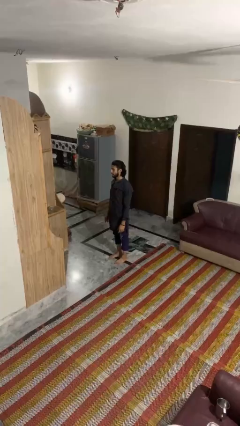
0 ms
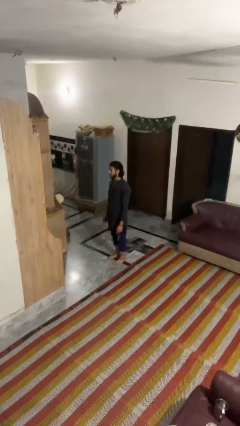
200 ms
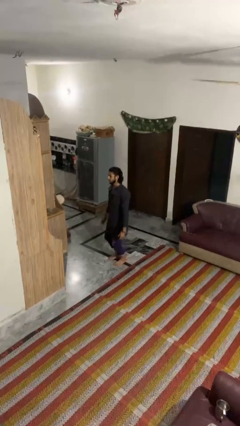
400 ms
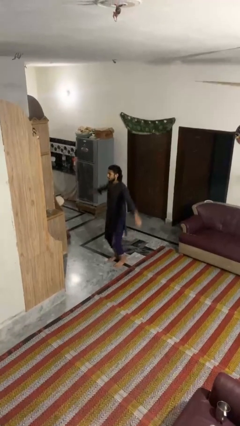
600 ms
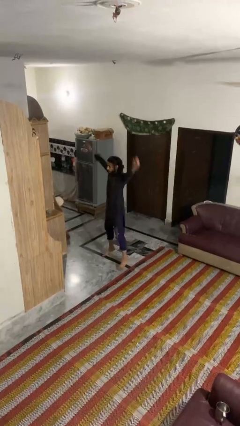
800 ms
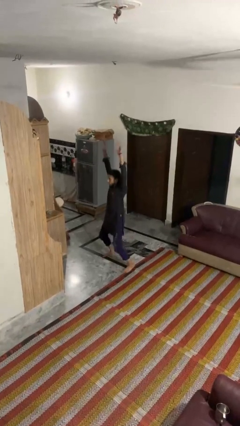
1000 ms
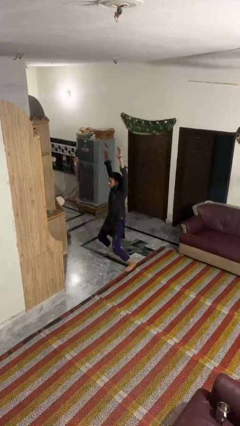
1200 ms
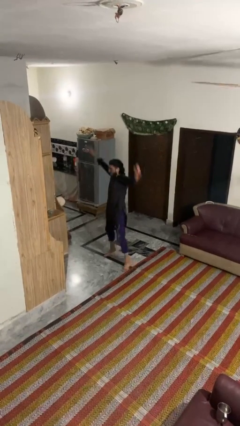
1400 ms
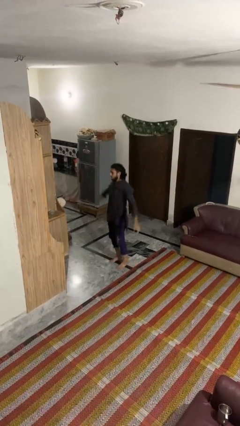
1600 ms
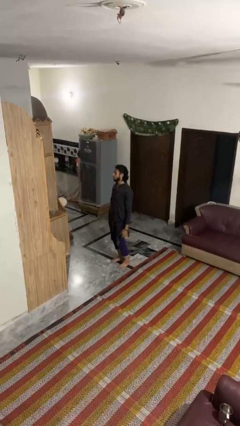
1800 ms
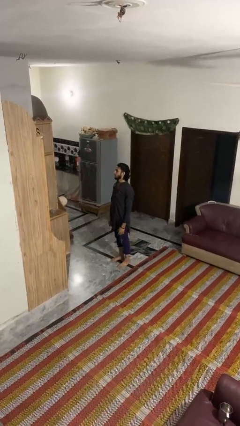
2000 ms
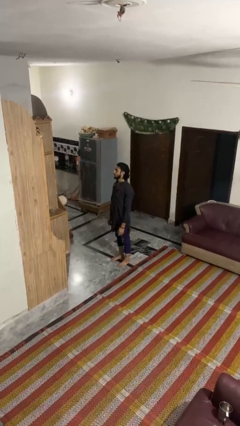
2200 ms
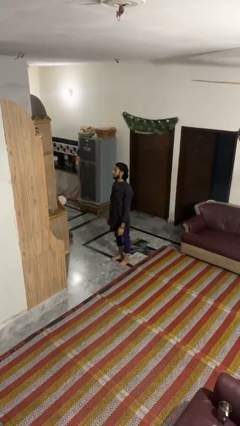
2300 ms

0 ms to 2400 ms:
person exercises with jumping jacks

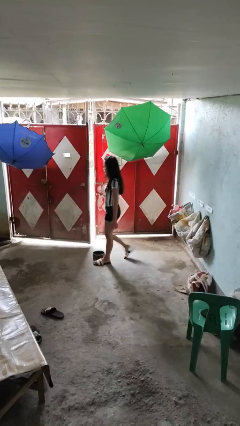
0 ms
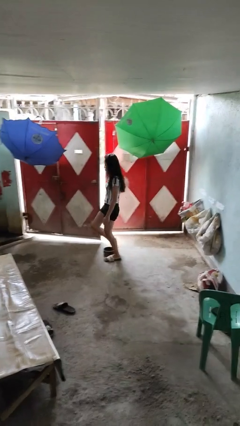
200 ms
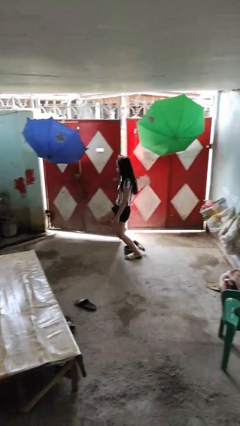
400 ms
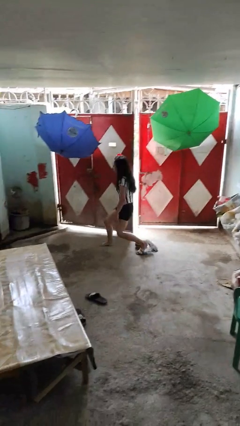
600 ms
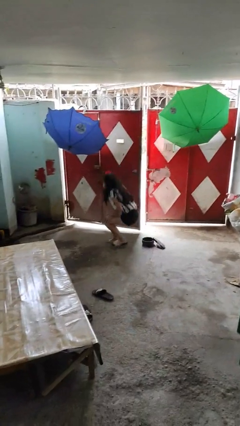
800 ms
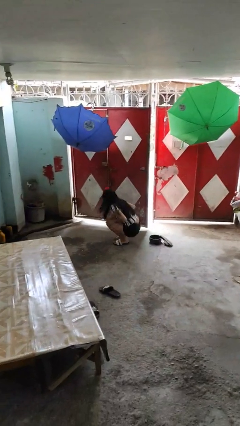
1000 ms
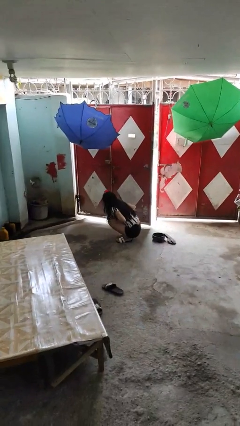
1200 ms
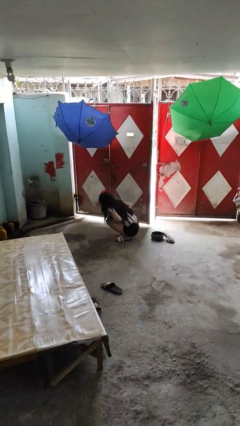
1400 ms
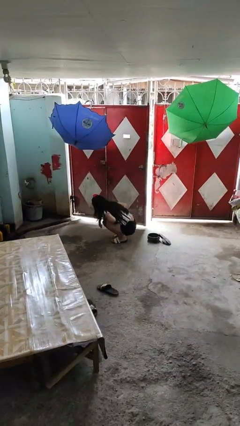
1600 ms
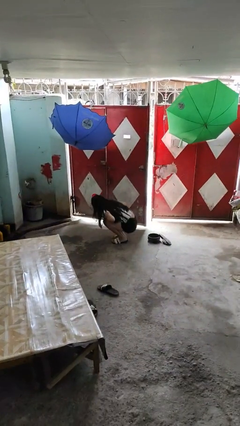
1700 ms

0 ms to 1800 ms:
person trips on object on floor

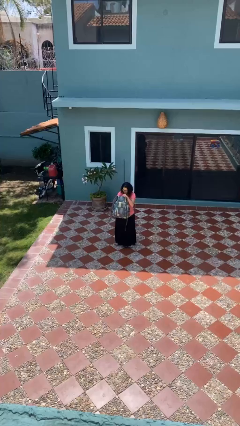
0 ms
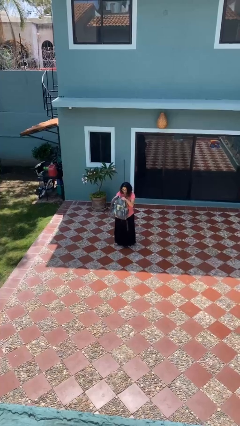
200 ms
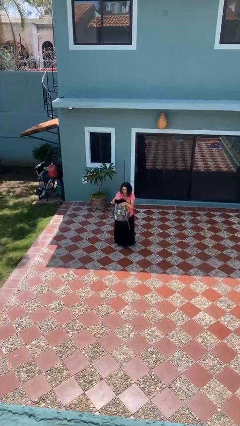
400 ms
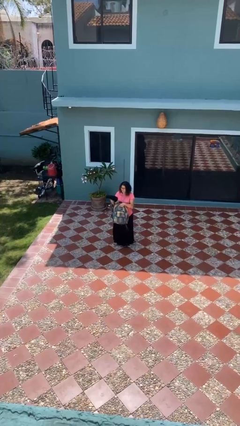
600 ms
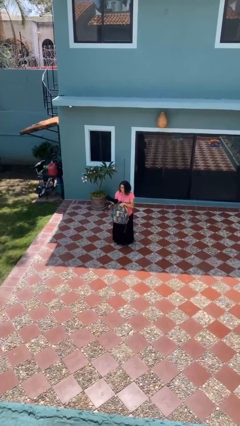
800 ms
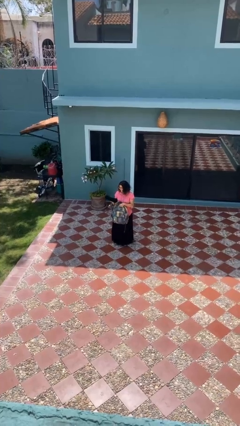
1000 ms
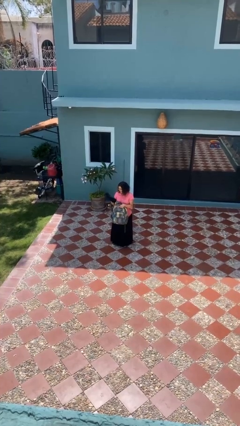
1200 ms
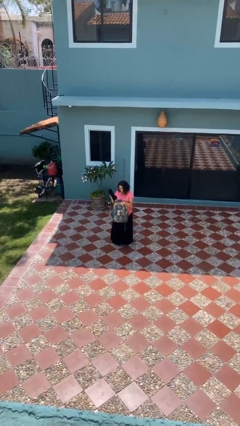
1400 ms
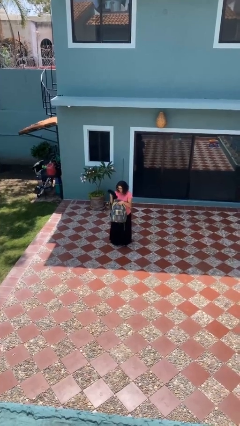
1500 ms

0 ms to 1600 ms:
person takes object from backpack

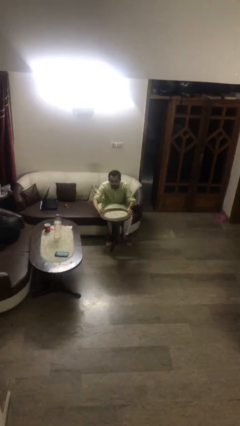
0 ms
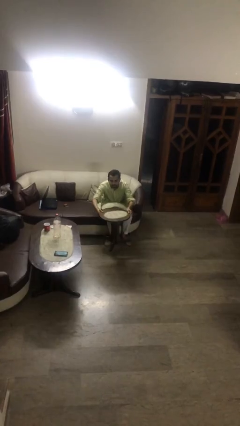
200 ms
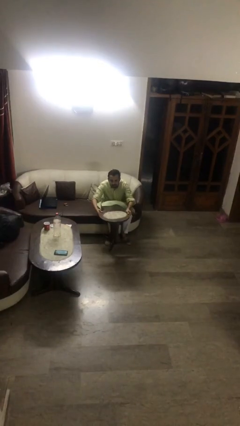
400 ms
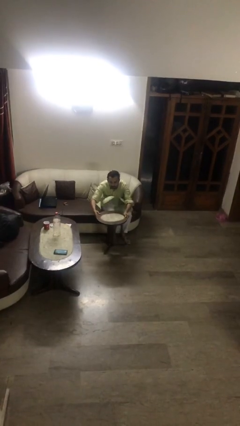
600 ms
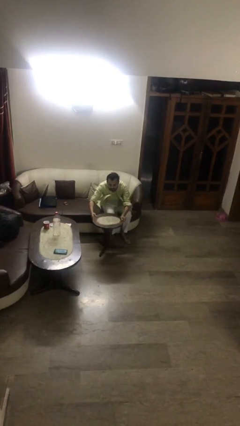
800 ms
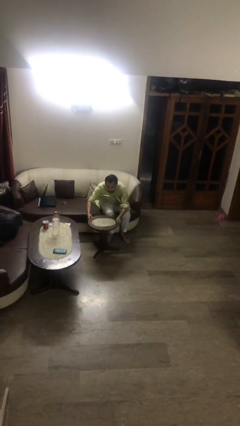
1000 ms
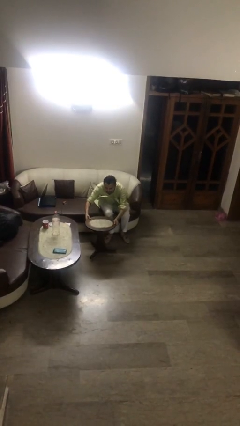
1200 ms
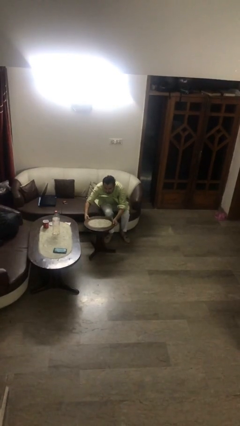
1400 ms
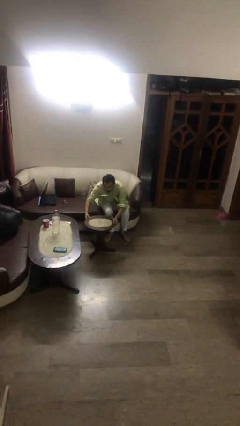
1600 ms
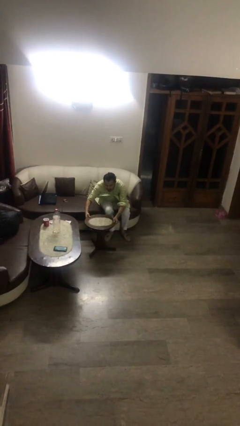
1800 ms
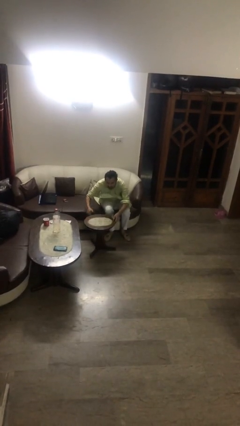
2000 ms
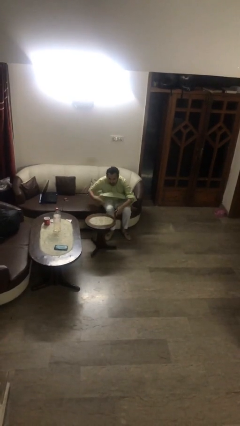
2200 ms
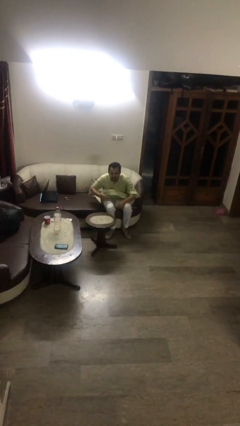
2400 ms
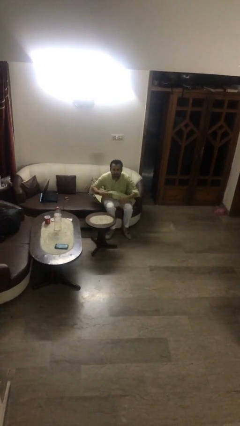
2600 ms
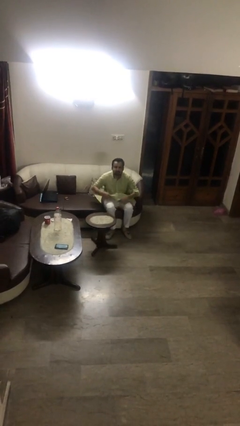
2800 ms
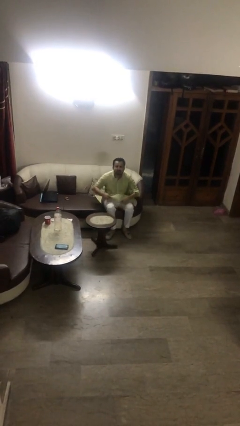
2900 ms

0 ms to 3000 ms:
person puts down object on floor

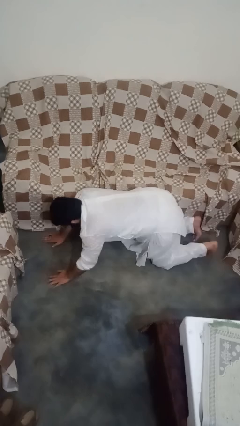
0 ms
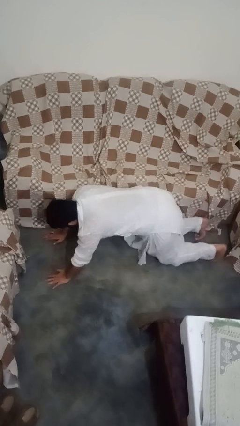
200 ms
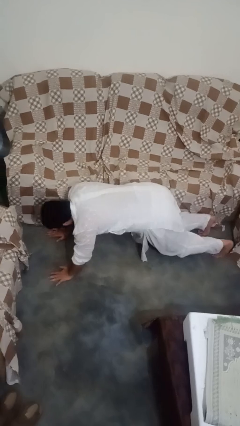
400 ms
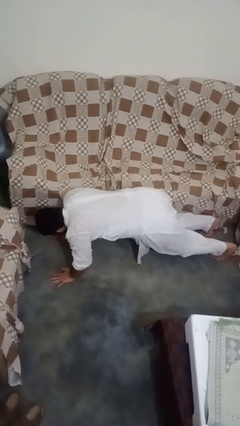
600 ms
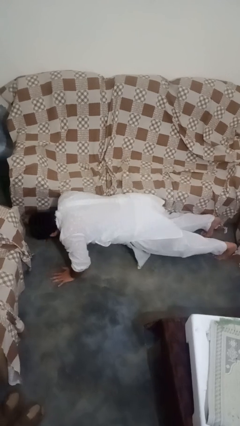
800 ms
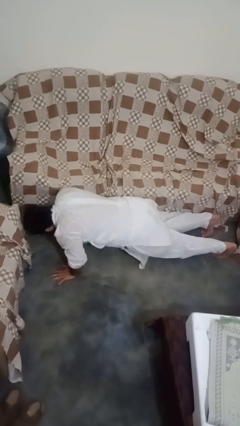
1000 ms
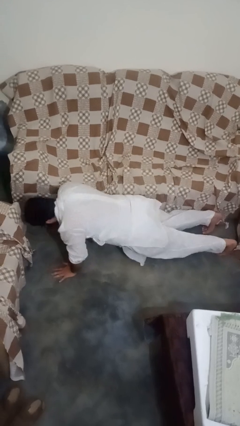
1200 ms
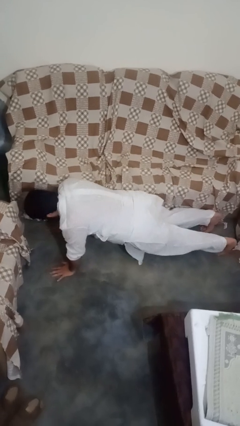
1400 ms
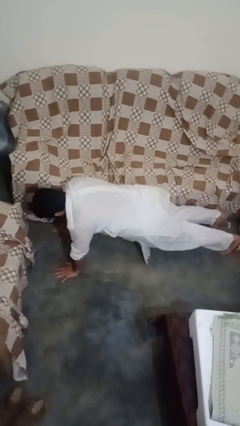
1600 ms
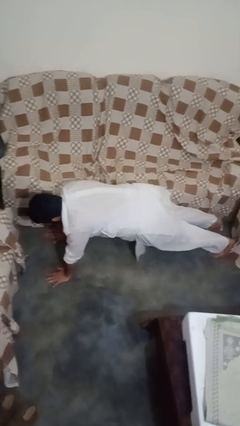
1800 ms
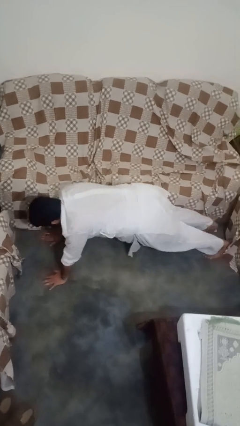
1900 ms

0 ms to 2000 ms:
person exercises with pushup

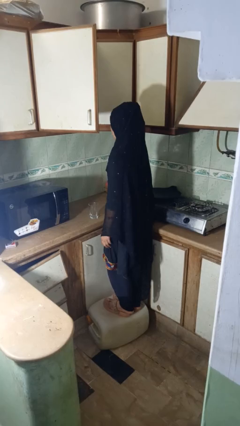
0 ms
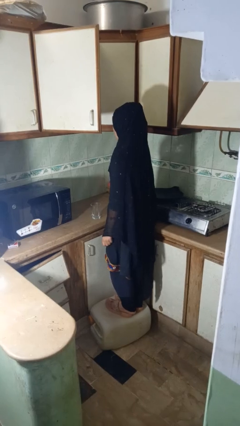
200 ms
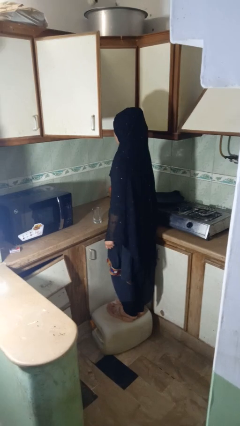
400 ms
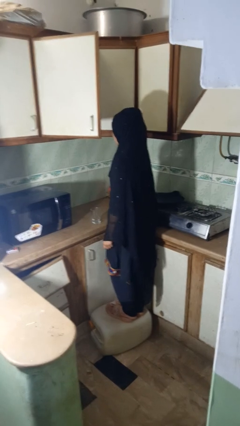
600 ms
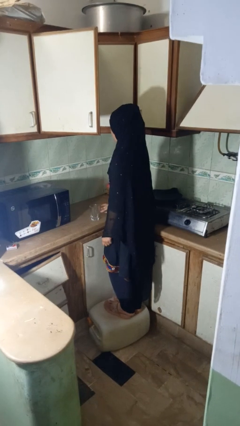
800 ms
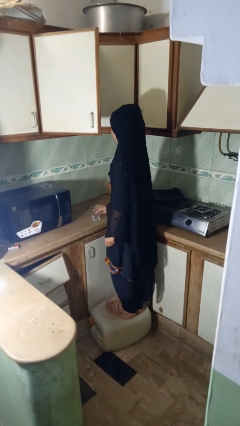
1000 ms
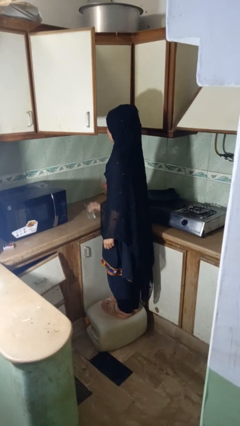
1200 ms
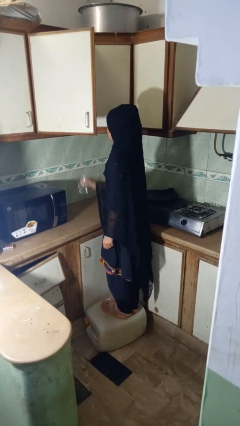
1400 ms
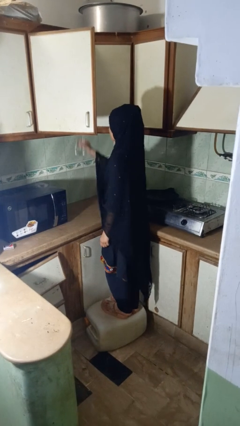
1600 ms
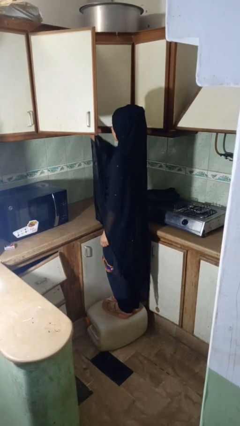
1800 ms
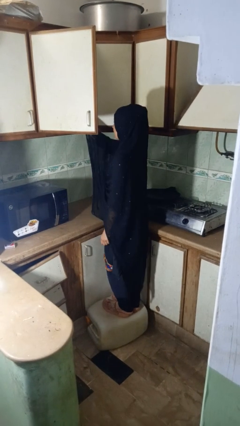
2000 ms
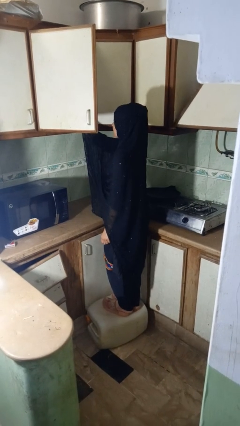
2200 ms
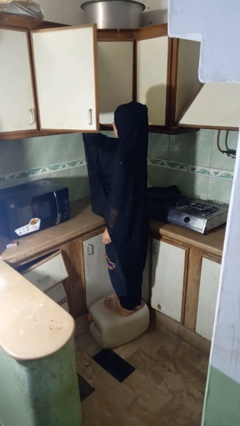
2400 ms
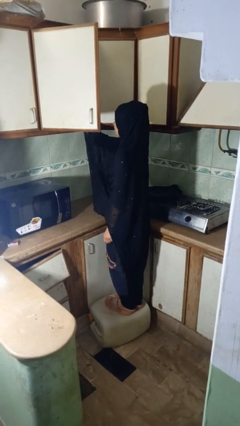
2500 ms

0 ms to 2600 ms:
person picks up object from cabinet

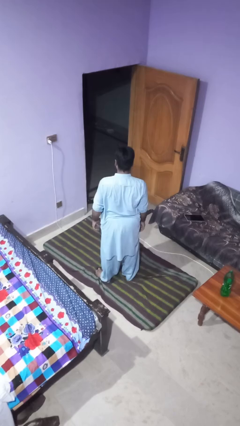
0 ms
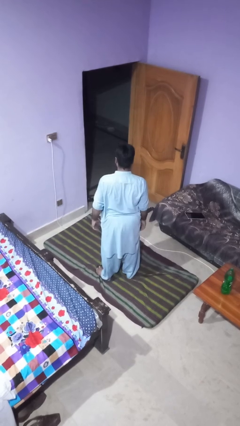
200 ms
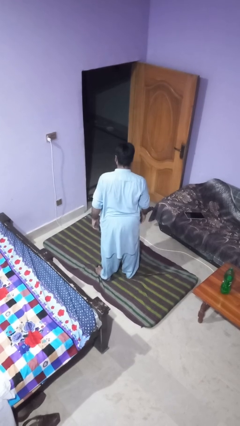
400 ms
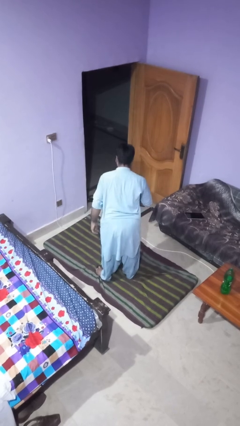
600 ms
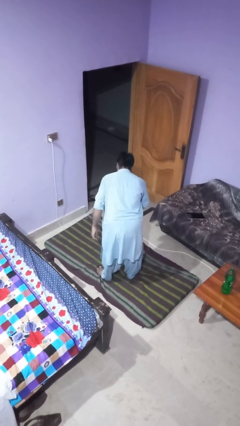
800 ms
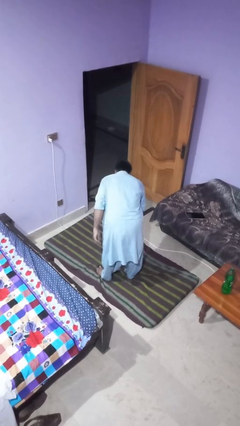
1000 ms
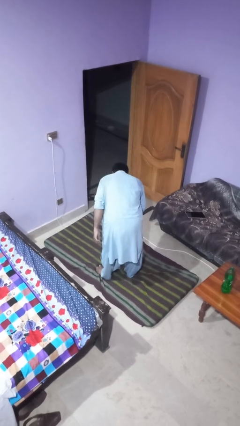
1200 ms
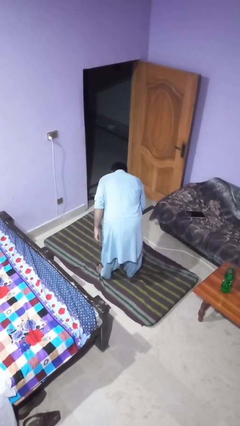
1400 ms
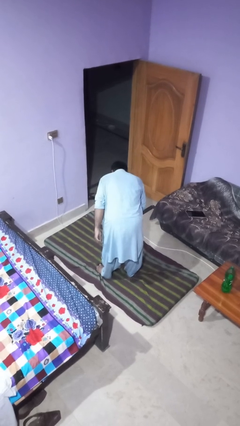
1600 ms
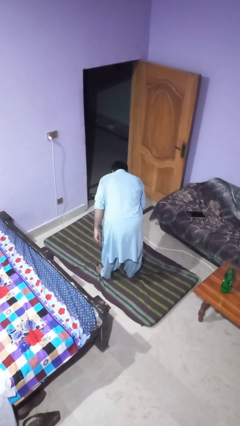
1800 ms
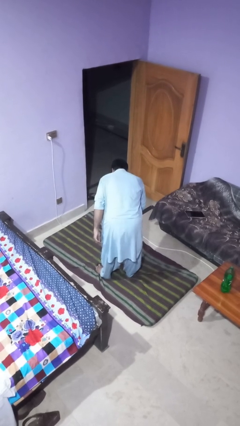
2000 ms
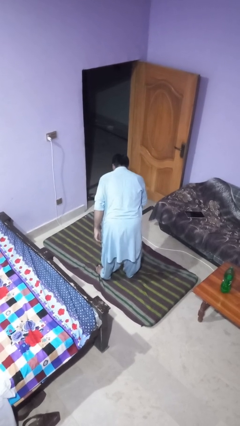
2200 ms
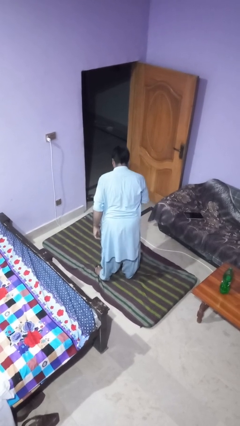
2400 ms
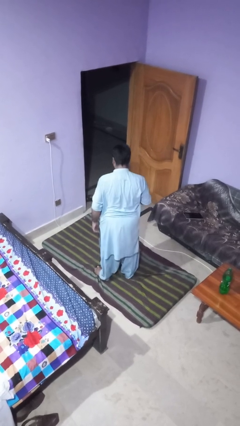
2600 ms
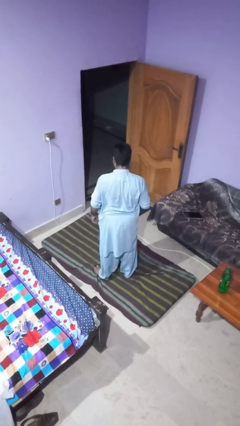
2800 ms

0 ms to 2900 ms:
person bows

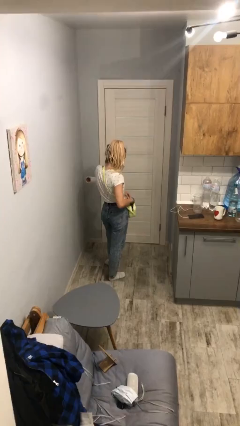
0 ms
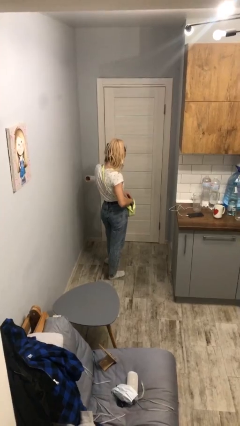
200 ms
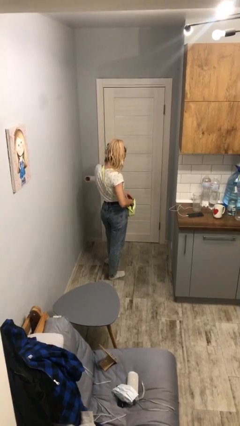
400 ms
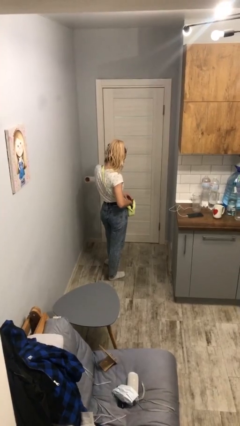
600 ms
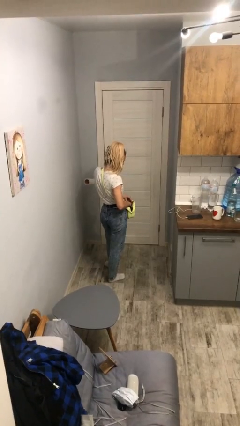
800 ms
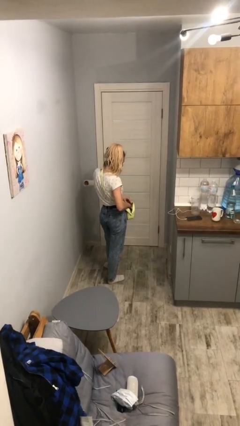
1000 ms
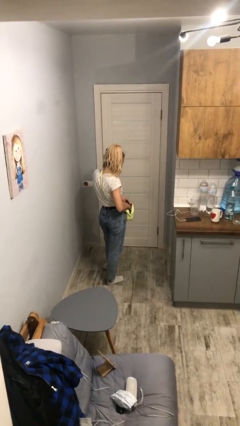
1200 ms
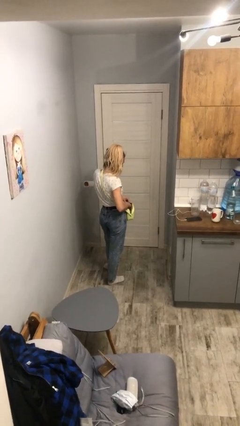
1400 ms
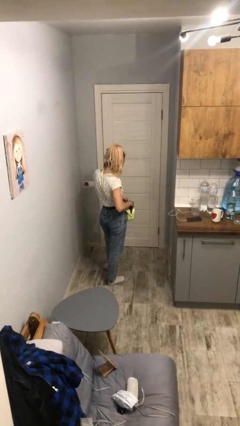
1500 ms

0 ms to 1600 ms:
person searches in purse
